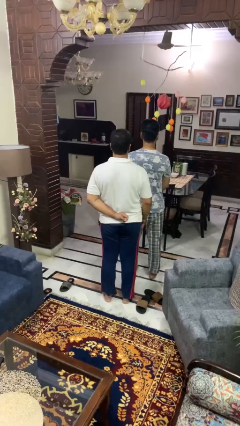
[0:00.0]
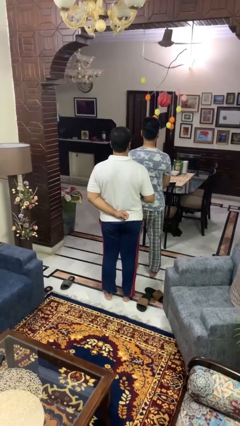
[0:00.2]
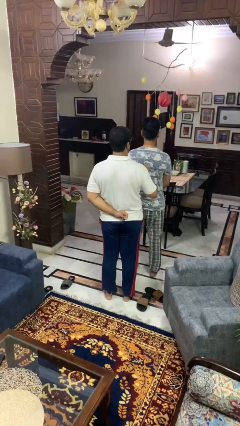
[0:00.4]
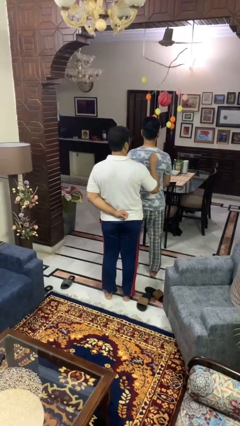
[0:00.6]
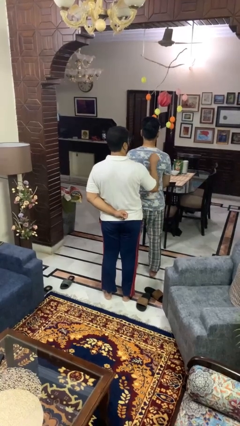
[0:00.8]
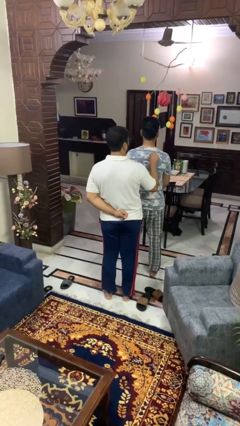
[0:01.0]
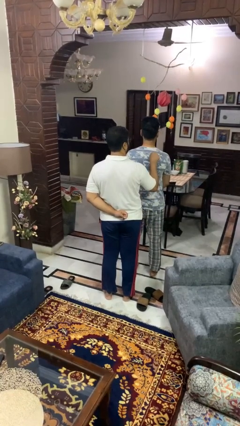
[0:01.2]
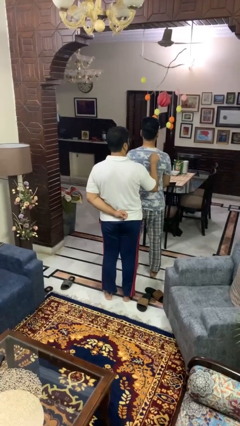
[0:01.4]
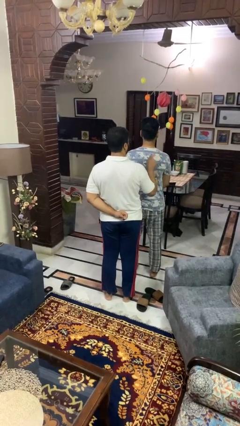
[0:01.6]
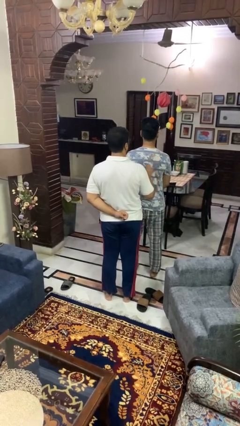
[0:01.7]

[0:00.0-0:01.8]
person touches back of person

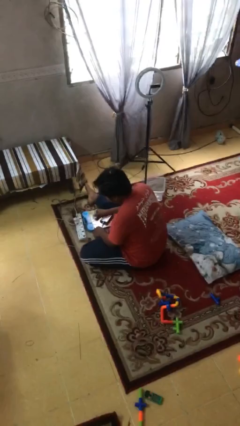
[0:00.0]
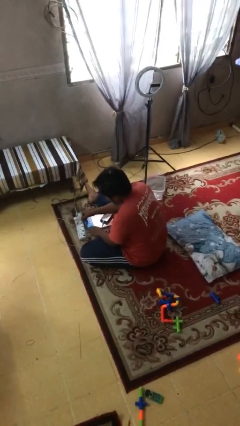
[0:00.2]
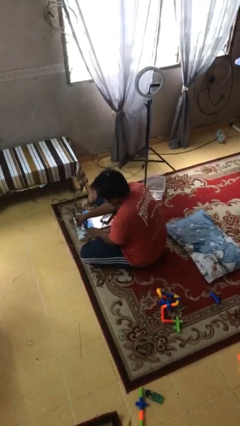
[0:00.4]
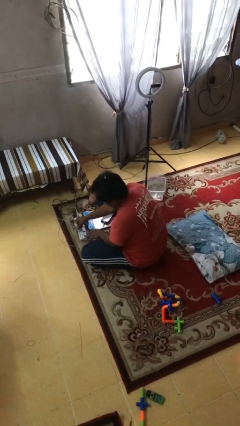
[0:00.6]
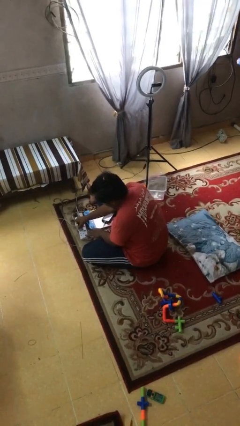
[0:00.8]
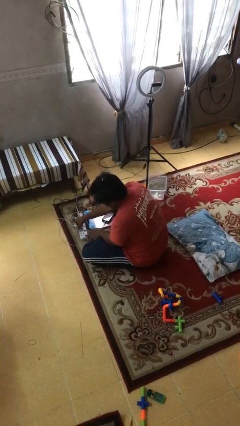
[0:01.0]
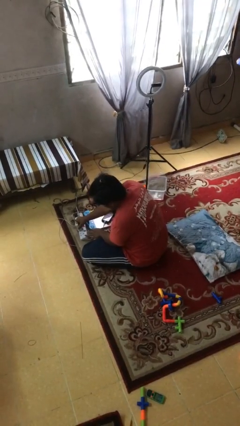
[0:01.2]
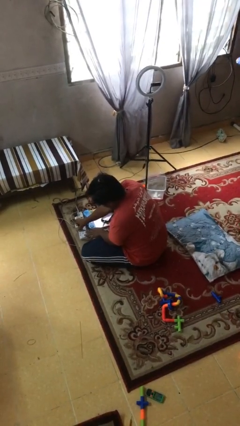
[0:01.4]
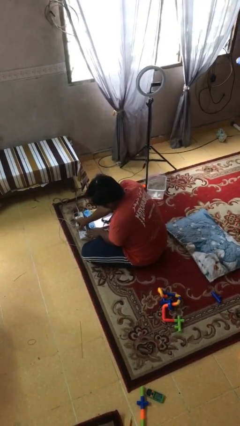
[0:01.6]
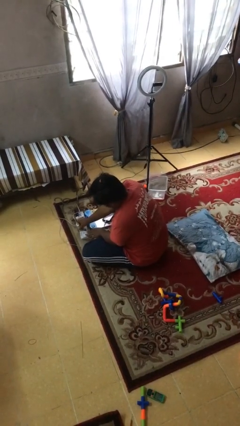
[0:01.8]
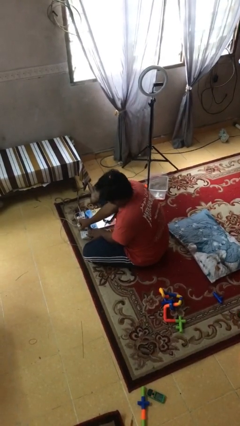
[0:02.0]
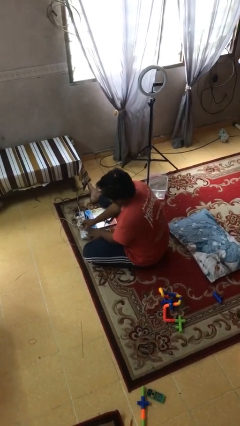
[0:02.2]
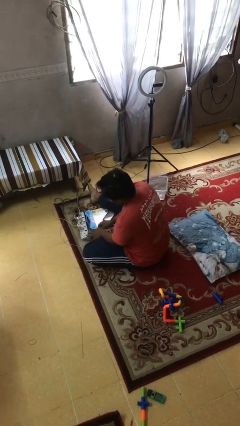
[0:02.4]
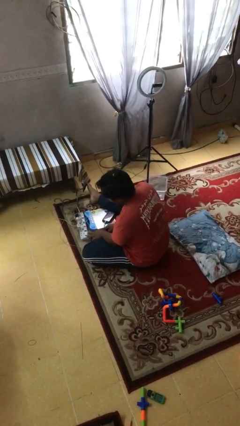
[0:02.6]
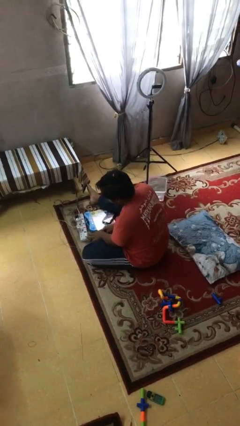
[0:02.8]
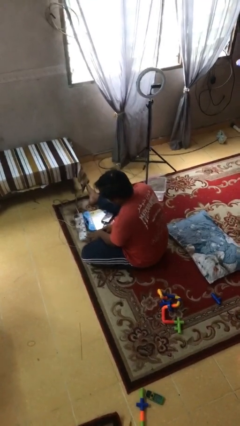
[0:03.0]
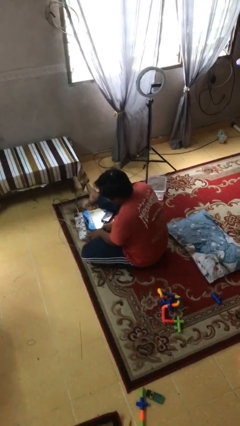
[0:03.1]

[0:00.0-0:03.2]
person plugs into electrical socket

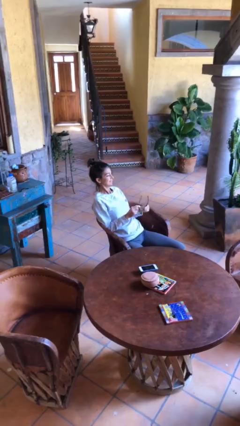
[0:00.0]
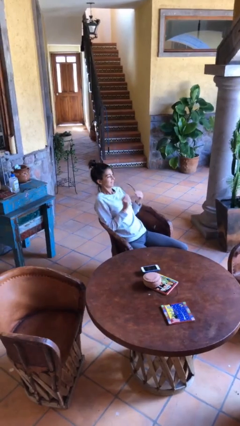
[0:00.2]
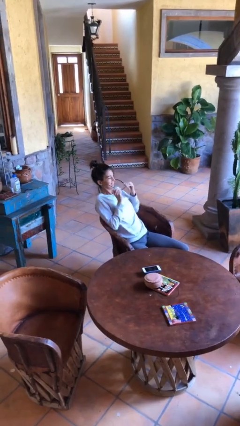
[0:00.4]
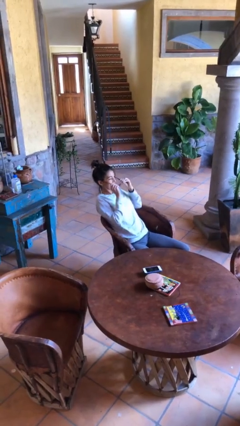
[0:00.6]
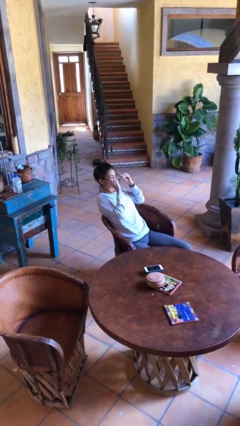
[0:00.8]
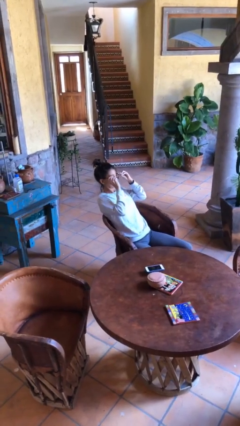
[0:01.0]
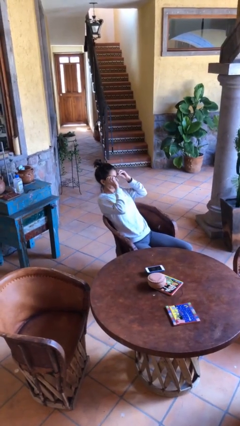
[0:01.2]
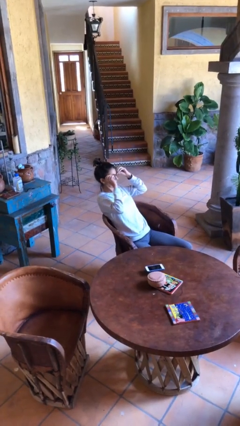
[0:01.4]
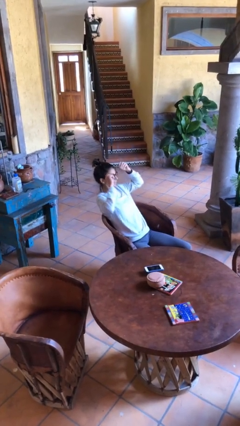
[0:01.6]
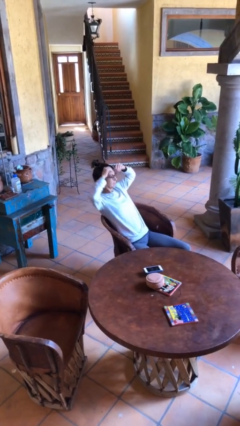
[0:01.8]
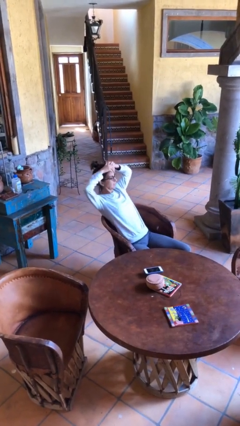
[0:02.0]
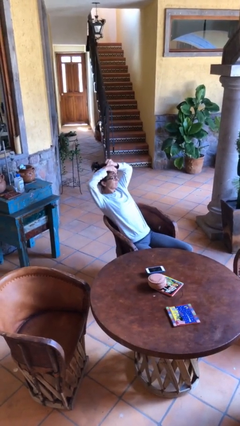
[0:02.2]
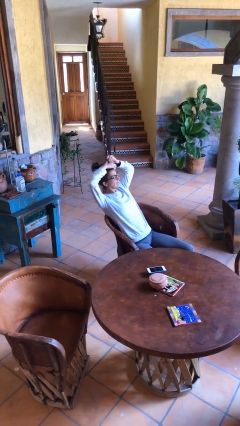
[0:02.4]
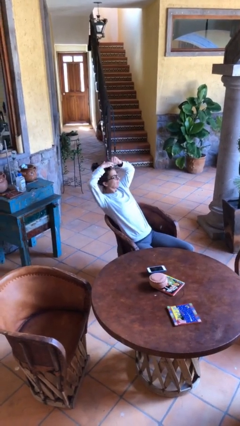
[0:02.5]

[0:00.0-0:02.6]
person puts on glasses

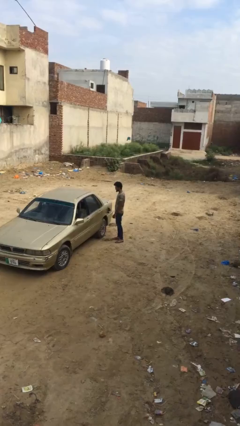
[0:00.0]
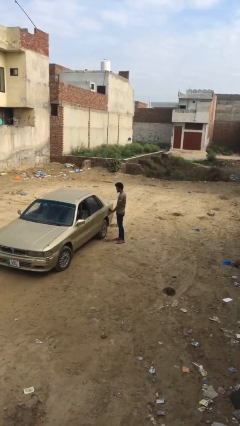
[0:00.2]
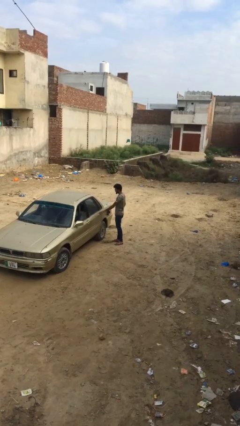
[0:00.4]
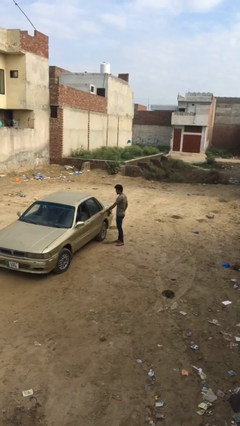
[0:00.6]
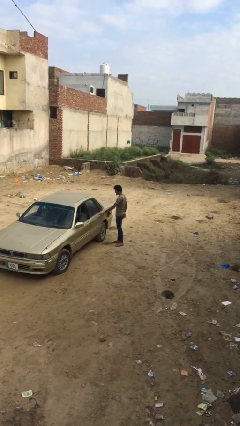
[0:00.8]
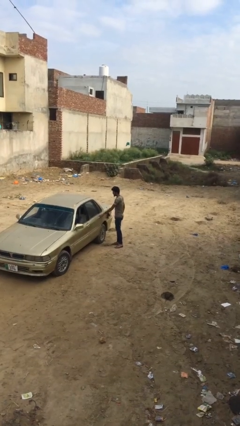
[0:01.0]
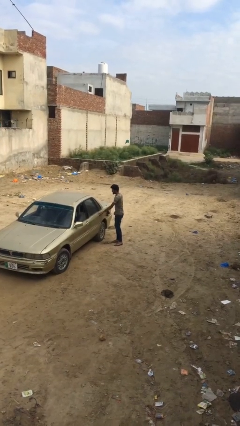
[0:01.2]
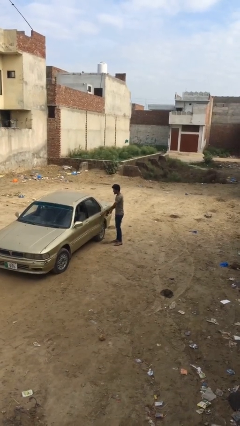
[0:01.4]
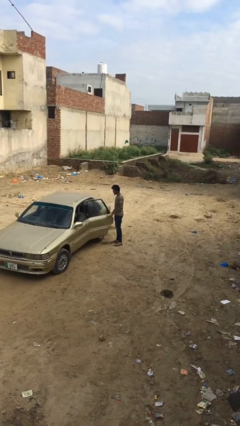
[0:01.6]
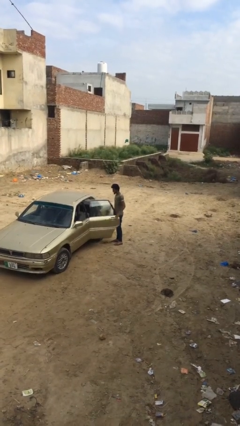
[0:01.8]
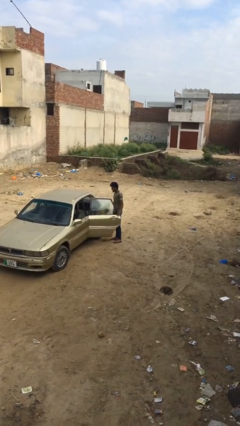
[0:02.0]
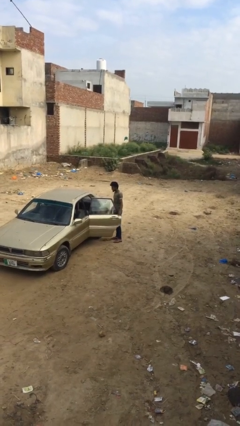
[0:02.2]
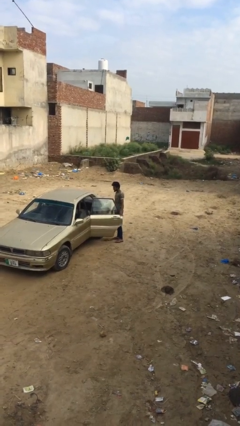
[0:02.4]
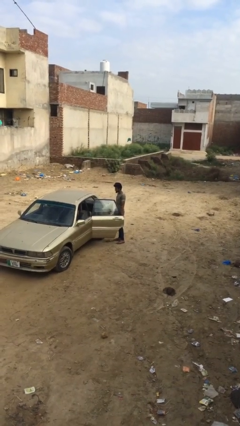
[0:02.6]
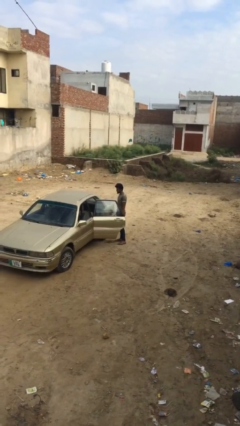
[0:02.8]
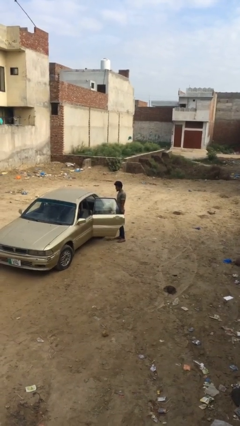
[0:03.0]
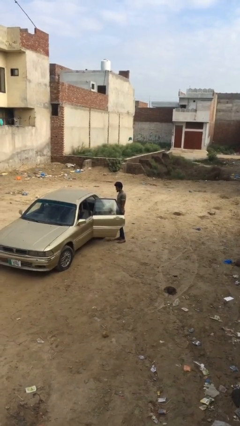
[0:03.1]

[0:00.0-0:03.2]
person opens car door

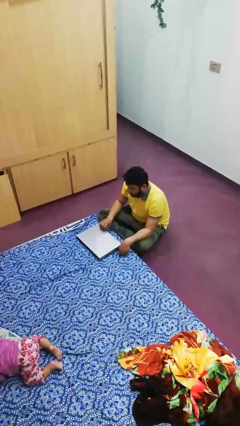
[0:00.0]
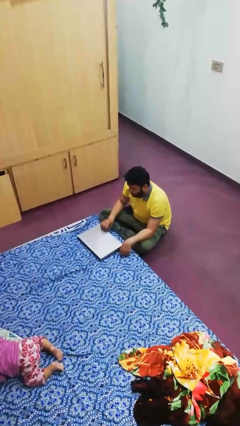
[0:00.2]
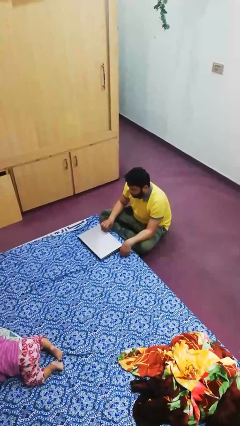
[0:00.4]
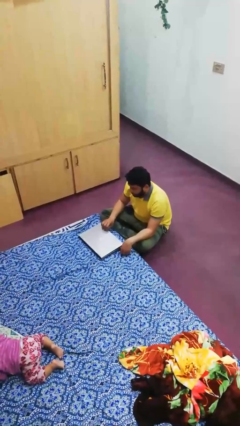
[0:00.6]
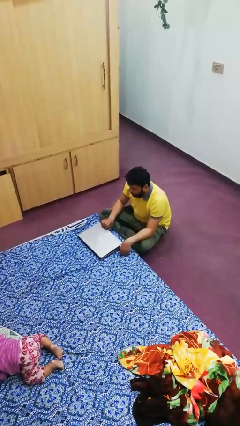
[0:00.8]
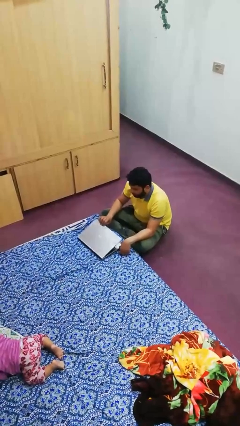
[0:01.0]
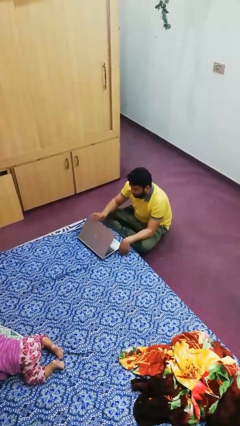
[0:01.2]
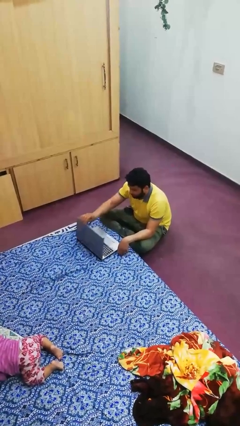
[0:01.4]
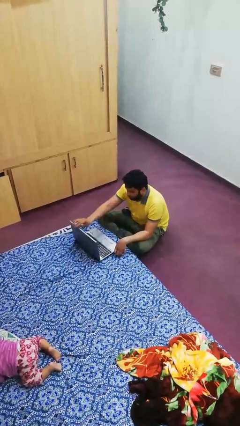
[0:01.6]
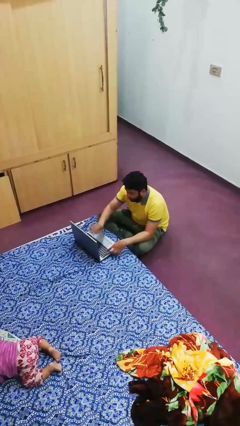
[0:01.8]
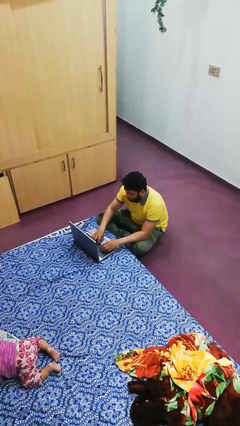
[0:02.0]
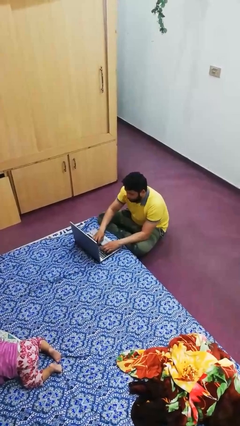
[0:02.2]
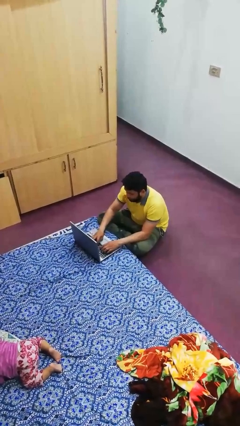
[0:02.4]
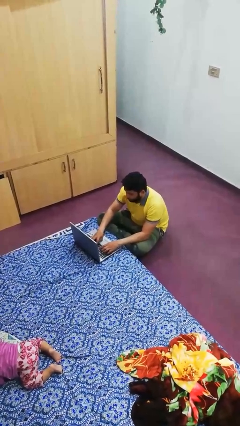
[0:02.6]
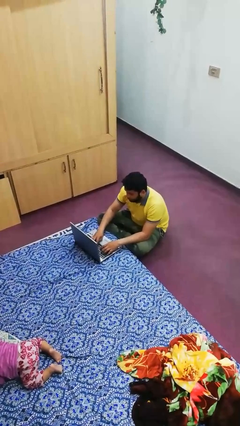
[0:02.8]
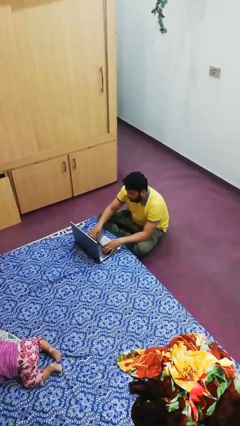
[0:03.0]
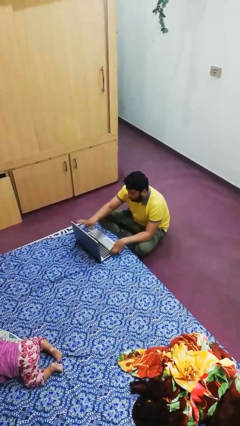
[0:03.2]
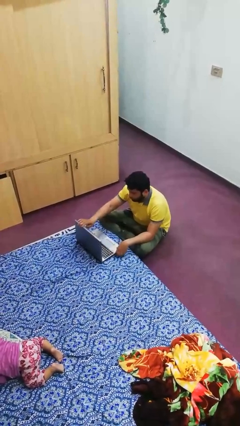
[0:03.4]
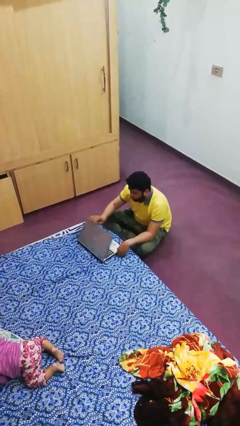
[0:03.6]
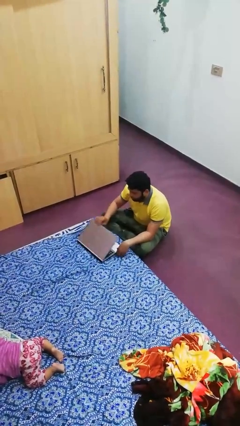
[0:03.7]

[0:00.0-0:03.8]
person interacts with laptop

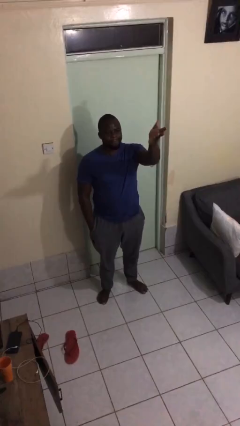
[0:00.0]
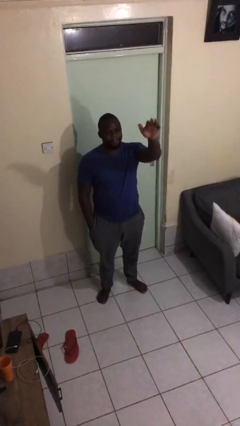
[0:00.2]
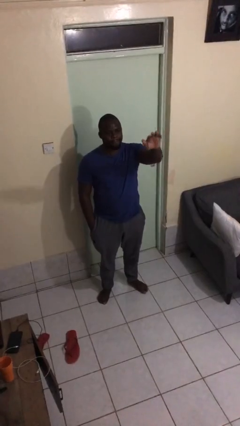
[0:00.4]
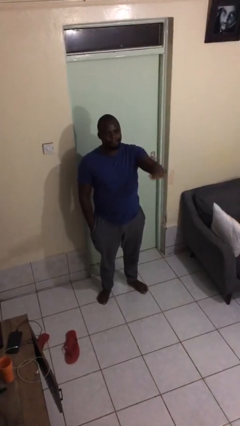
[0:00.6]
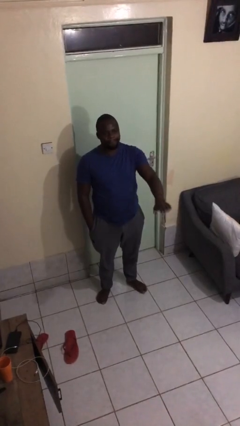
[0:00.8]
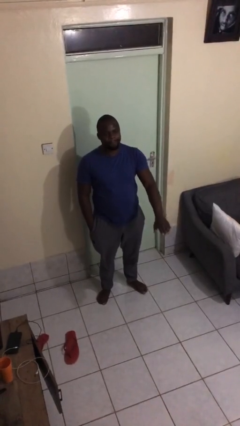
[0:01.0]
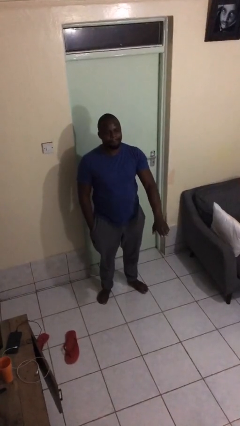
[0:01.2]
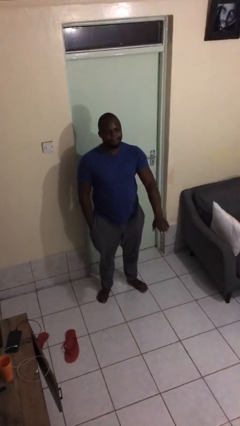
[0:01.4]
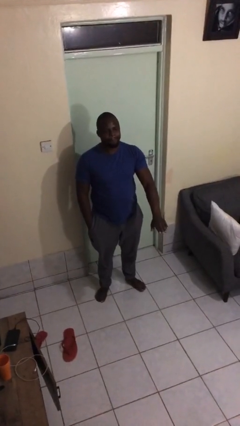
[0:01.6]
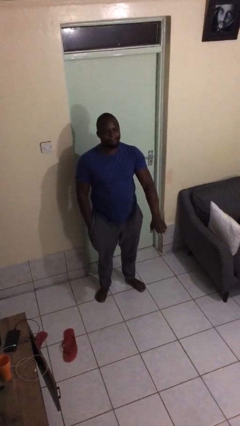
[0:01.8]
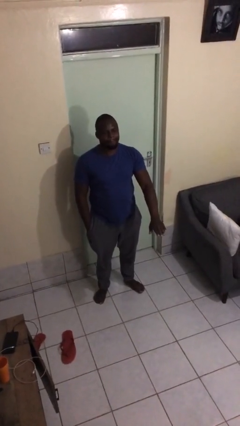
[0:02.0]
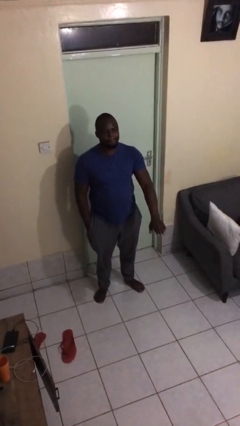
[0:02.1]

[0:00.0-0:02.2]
person gestures swipe down

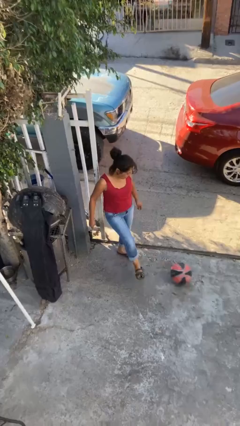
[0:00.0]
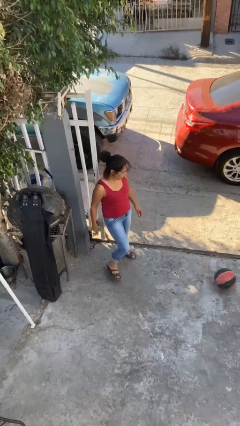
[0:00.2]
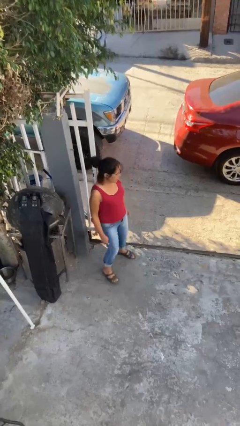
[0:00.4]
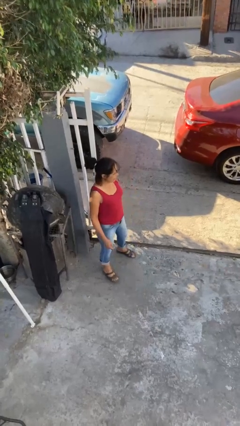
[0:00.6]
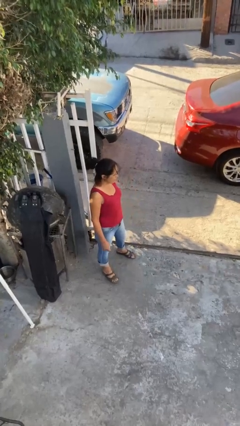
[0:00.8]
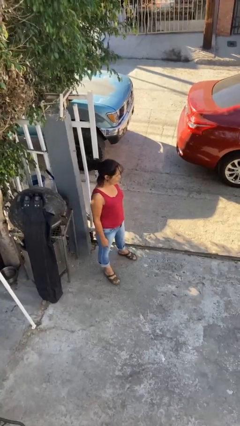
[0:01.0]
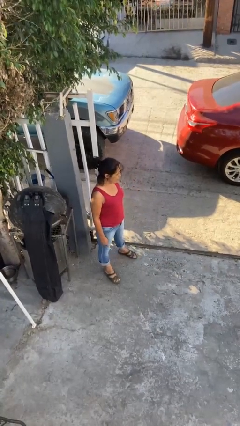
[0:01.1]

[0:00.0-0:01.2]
person kicks object to person
